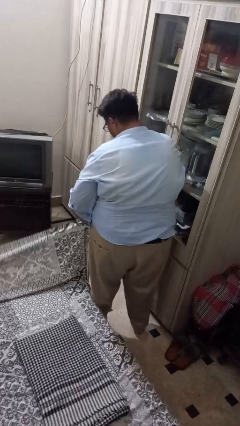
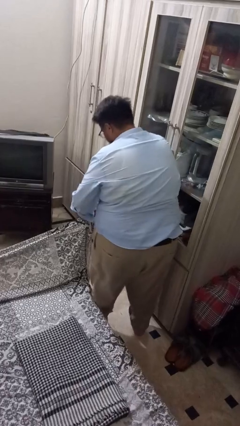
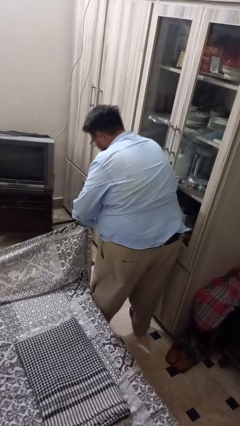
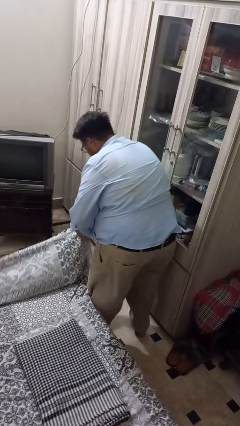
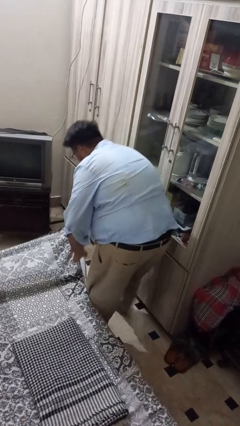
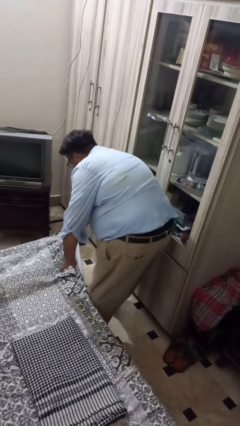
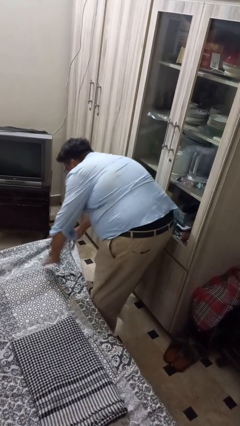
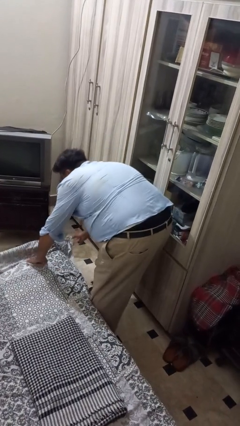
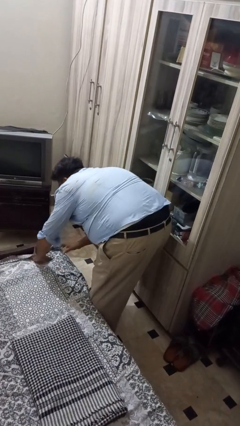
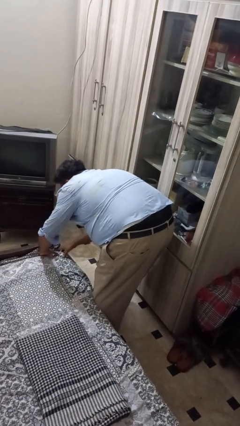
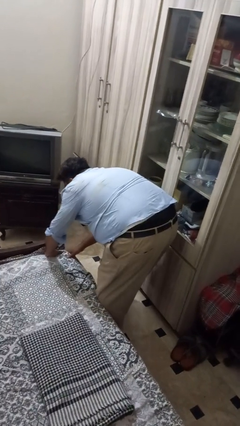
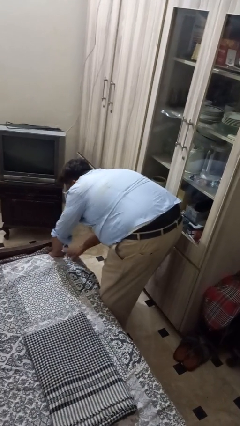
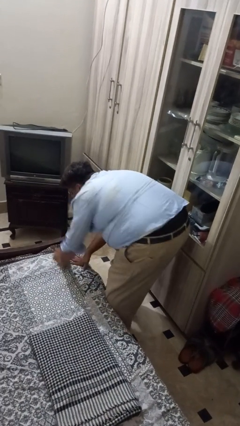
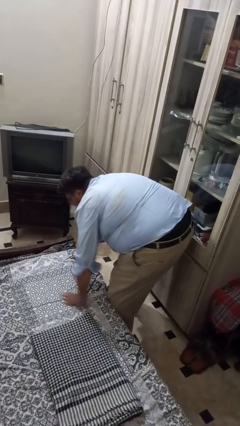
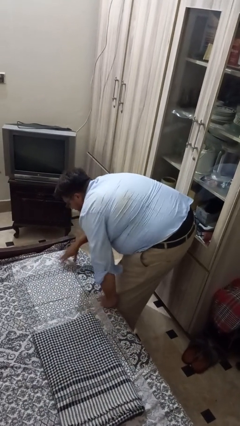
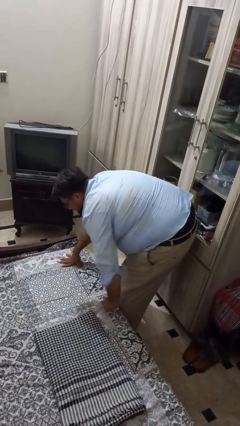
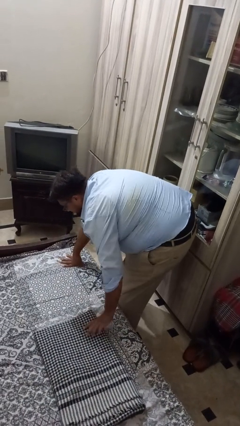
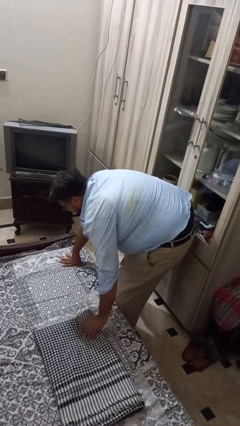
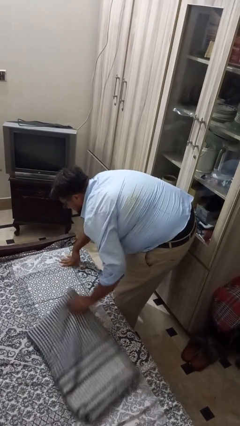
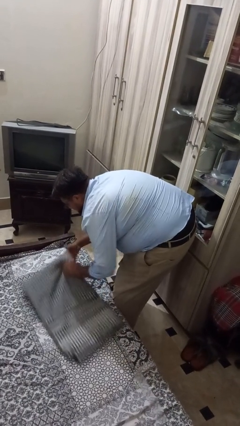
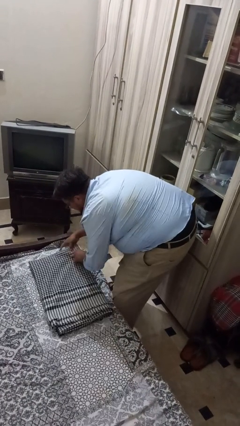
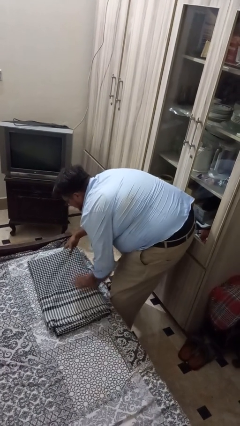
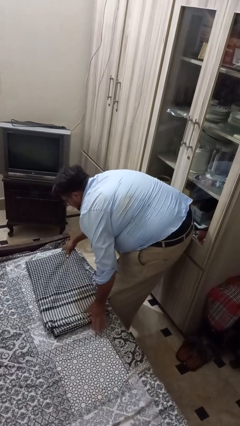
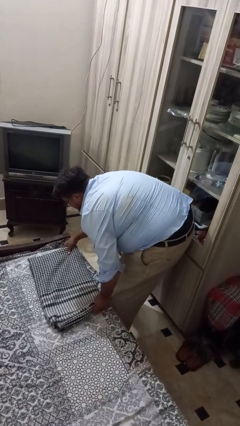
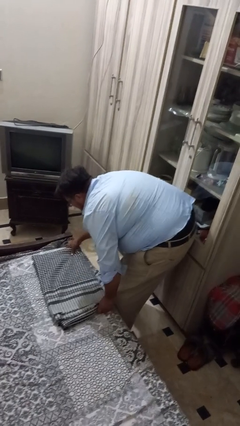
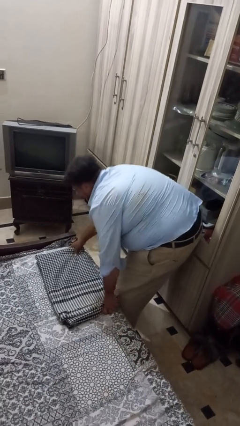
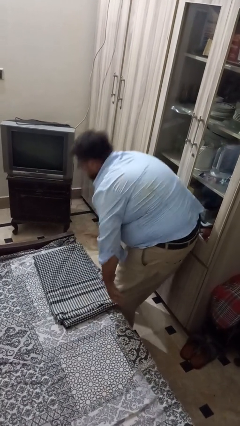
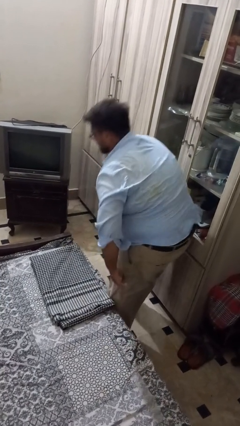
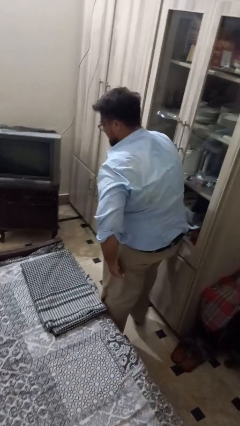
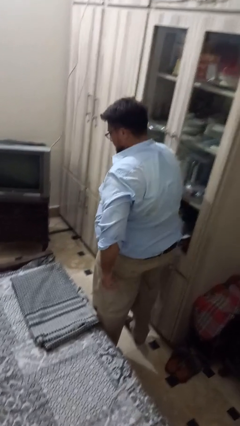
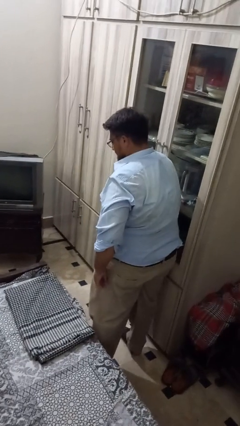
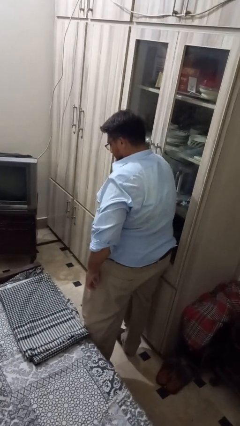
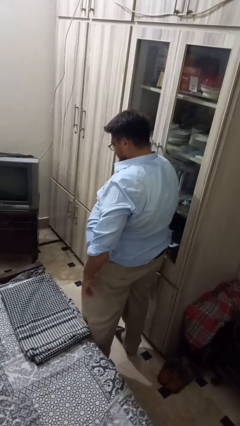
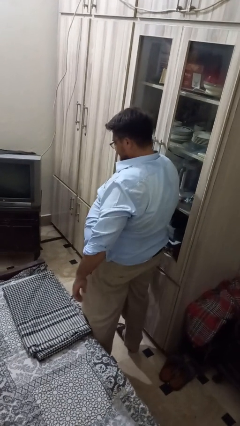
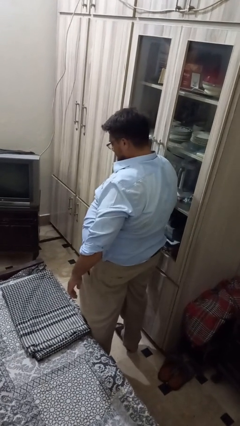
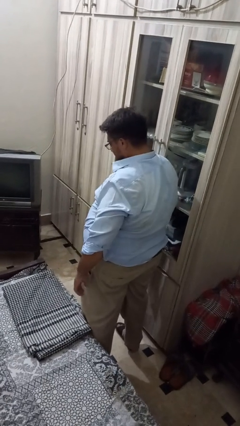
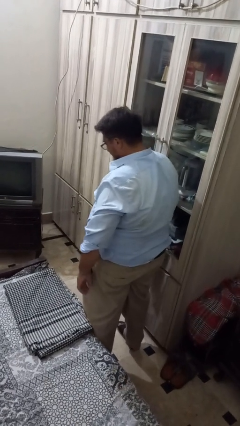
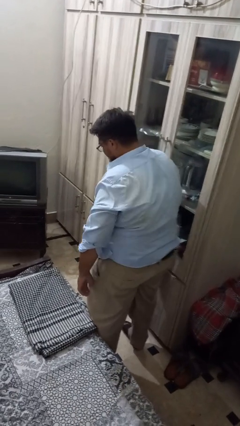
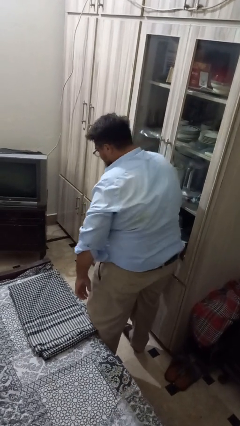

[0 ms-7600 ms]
person makes bed

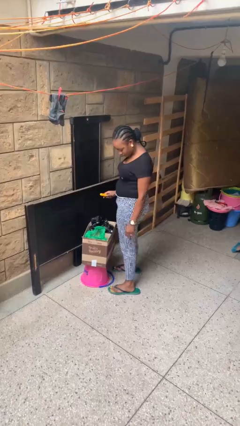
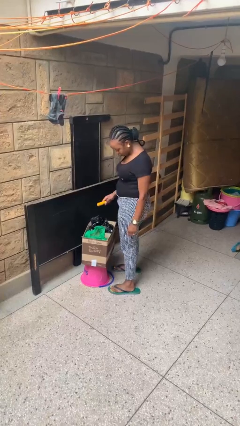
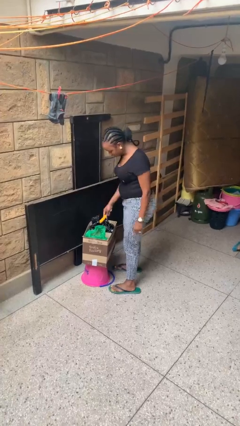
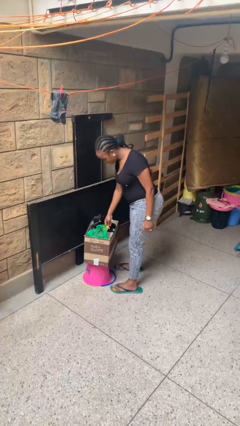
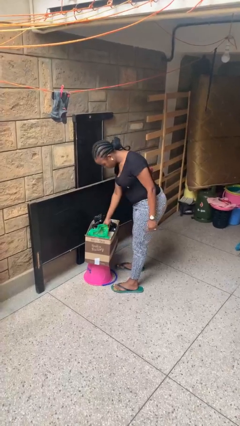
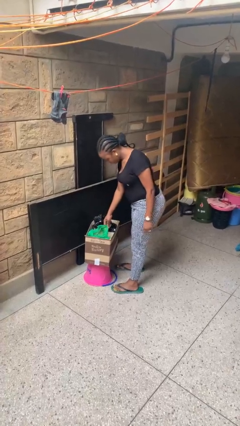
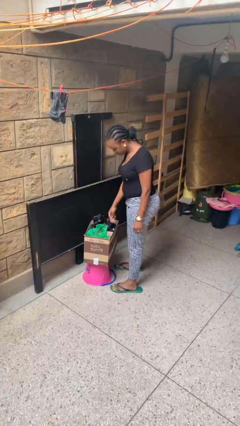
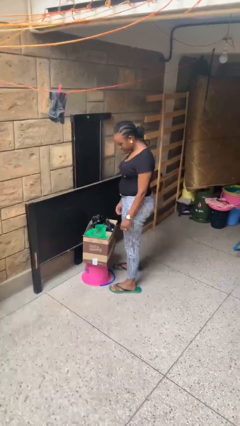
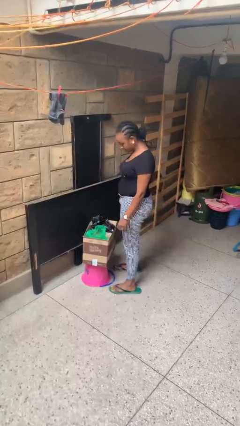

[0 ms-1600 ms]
person puts object into box

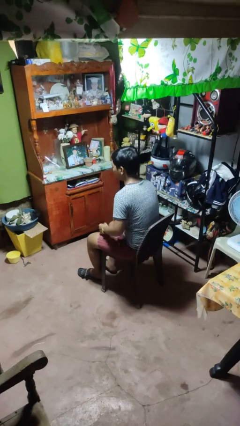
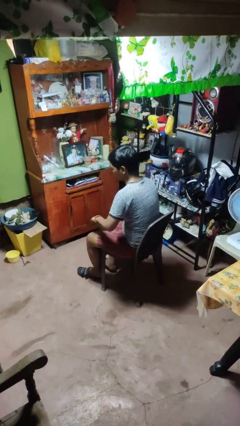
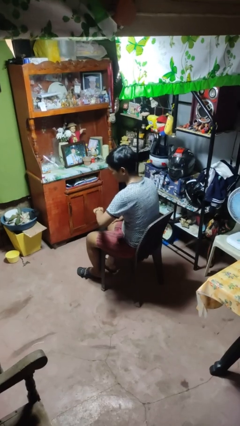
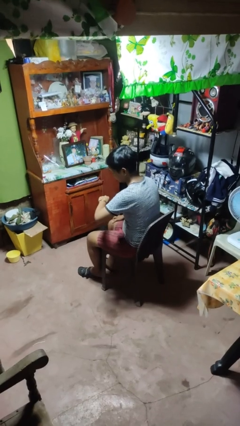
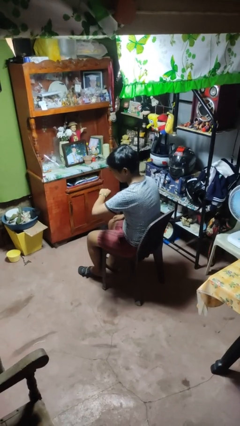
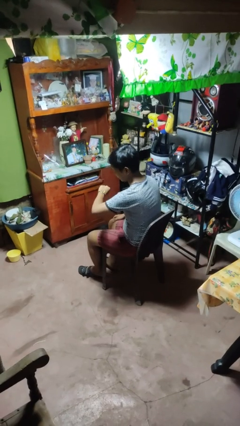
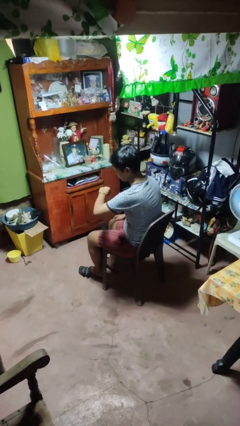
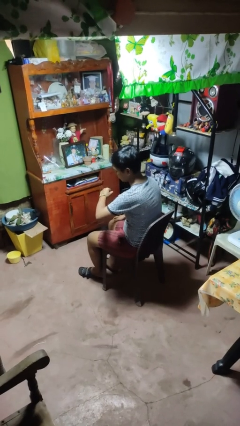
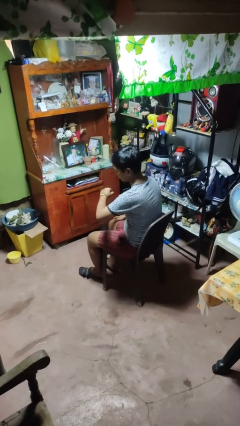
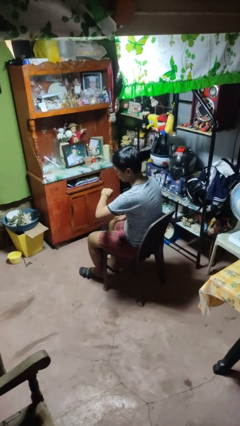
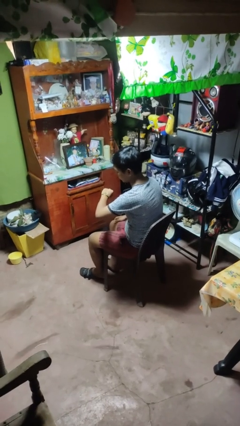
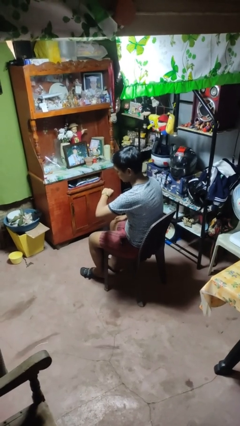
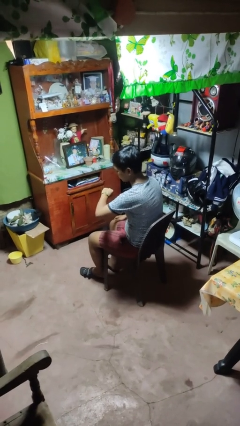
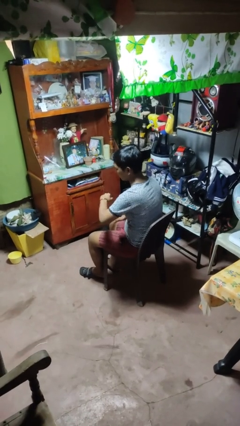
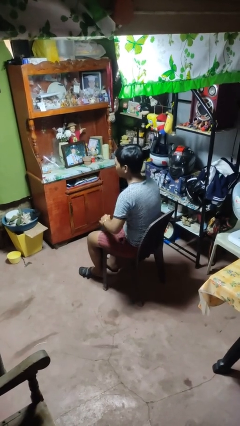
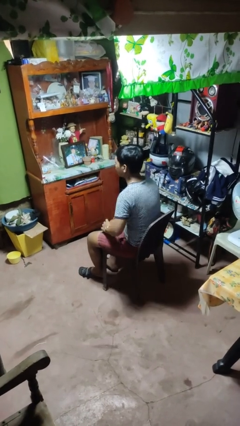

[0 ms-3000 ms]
person looks at wristwatch

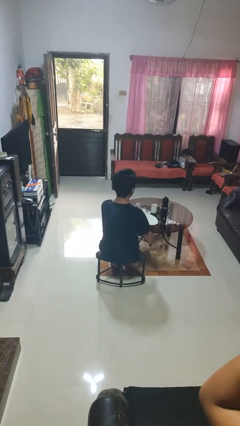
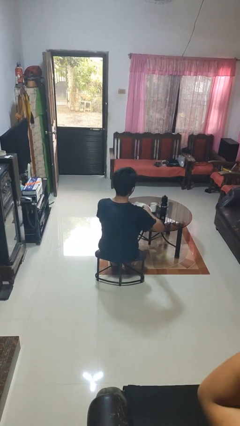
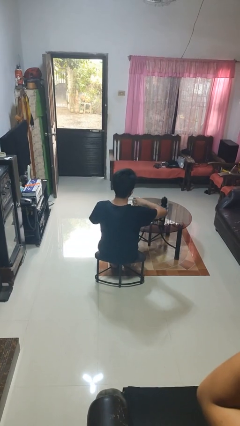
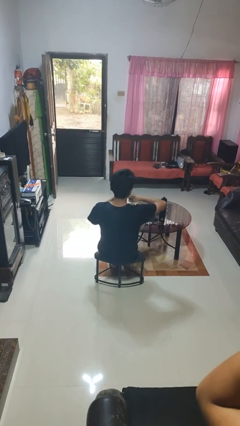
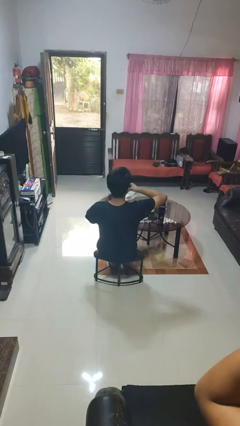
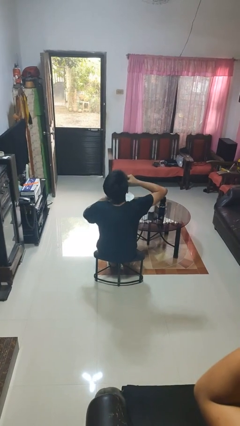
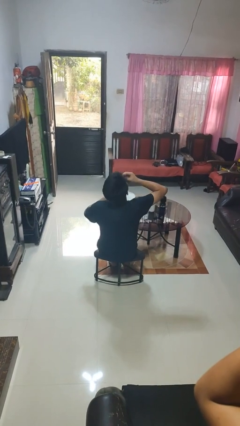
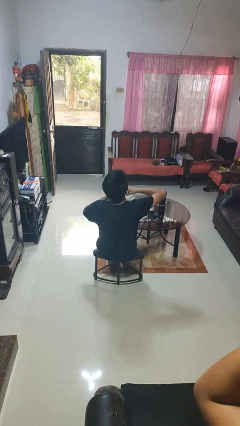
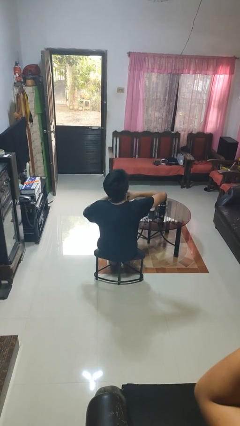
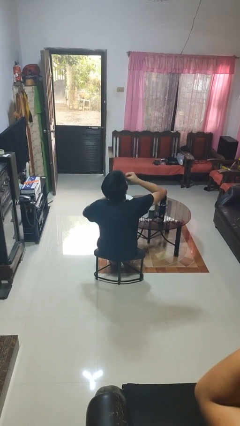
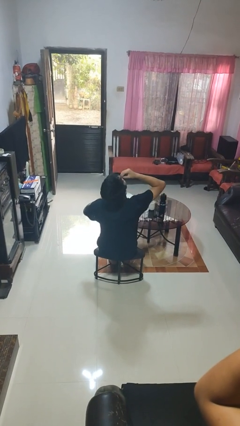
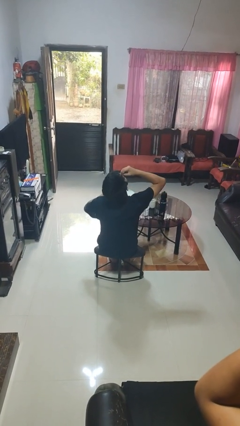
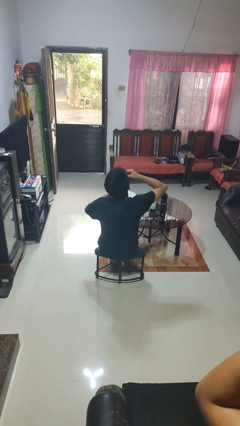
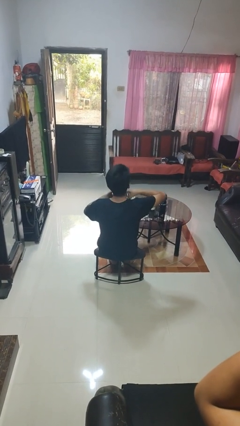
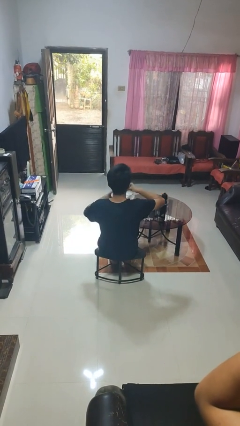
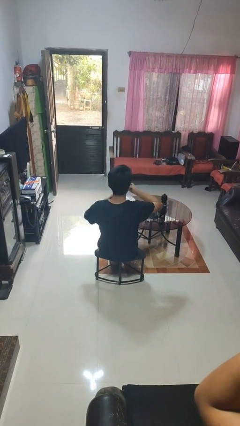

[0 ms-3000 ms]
person eats with hands

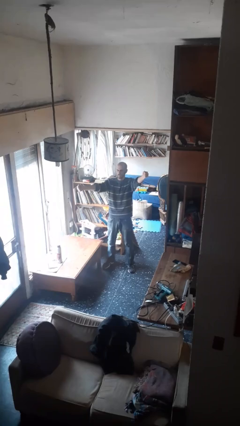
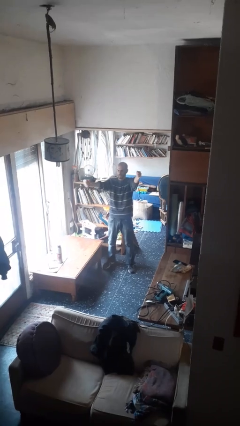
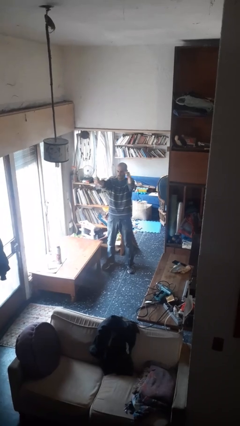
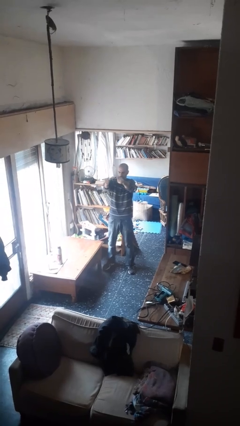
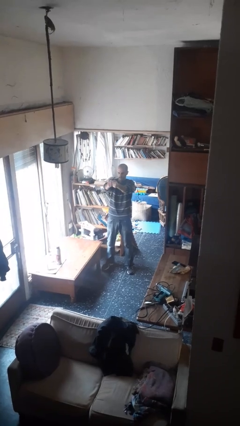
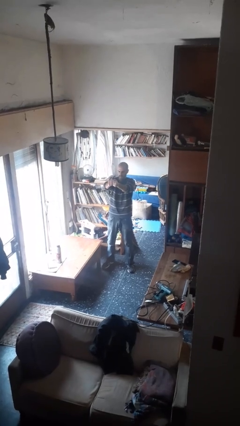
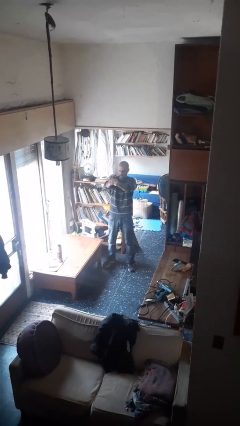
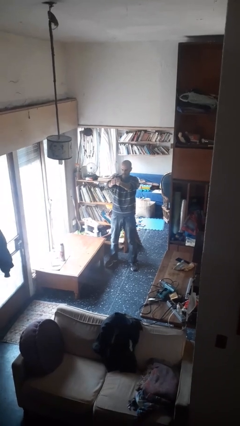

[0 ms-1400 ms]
person gestures zoom out

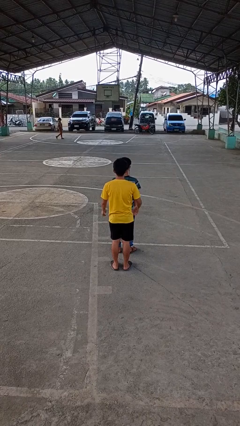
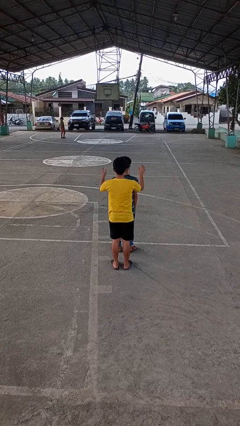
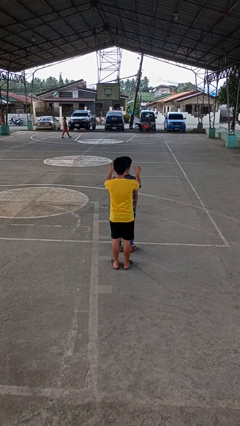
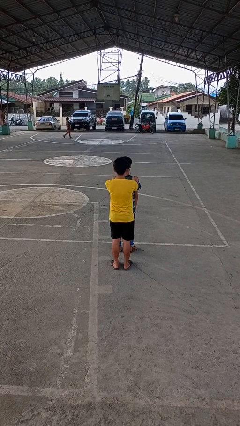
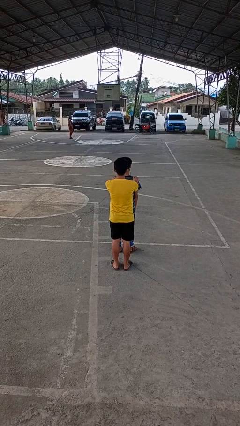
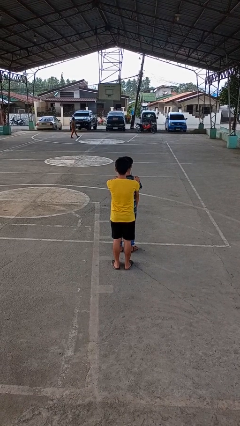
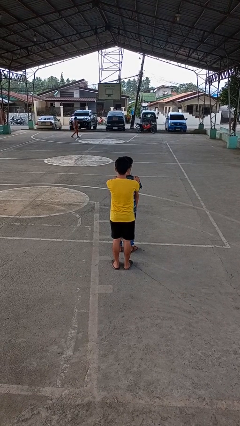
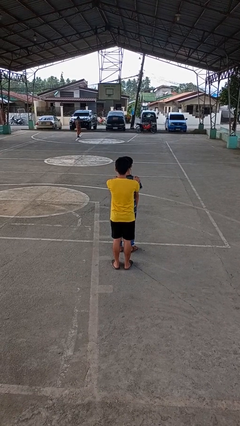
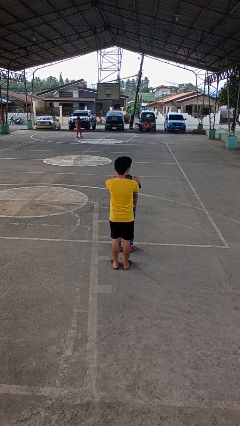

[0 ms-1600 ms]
person grabs person by shoulder
